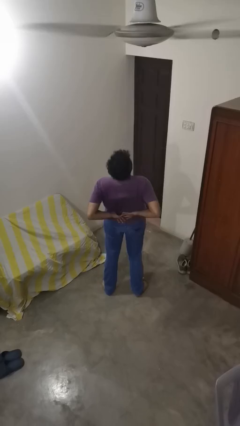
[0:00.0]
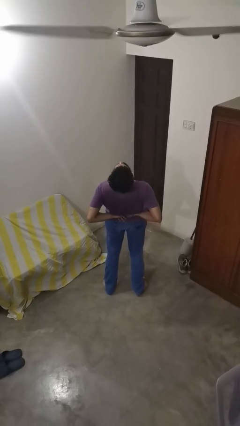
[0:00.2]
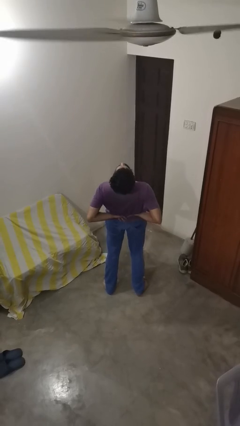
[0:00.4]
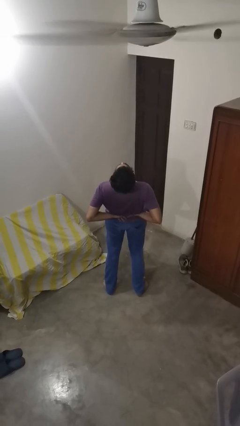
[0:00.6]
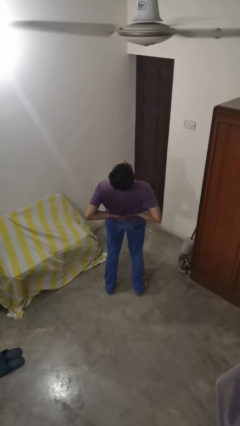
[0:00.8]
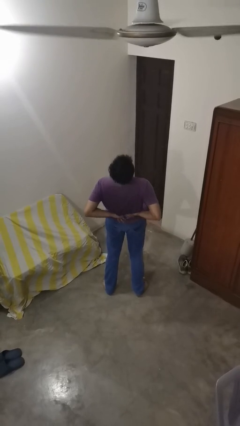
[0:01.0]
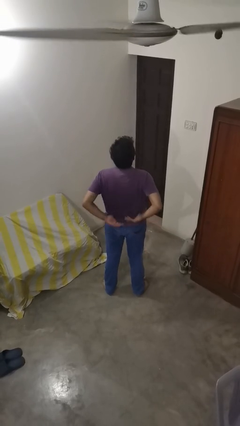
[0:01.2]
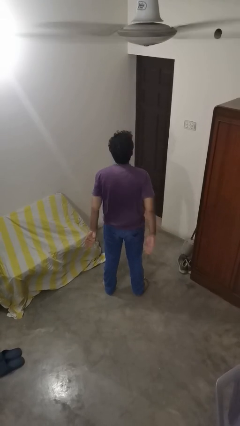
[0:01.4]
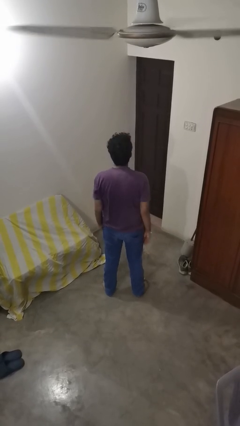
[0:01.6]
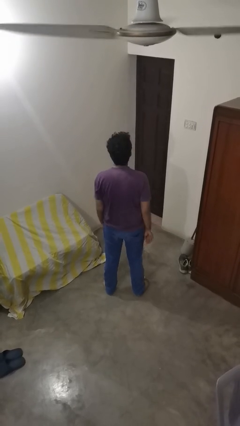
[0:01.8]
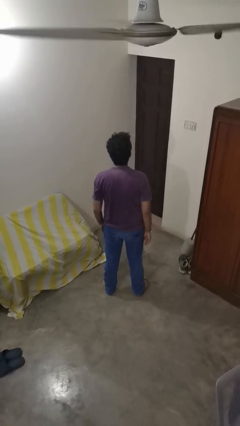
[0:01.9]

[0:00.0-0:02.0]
person stretches back

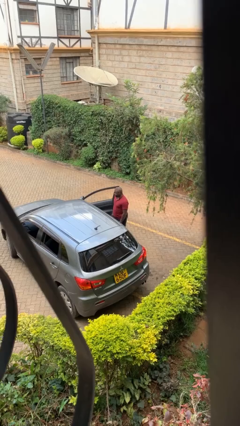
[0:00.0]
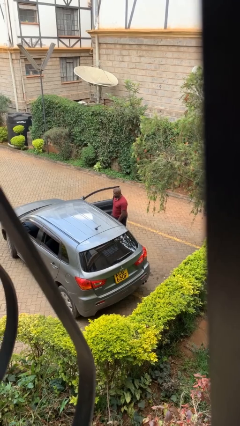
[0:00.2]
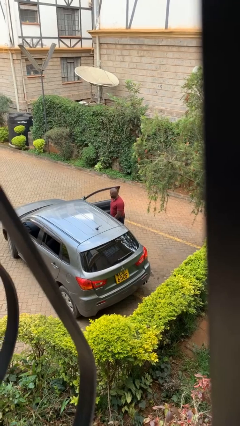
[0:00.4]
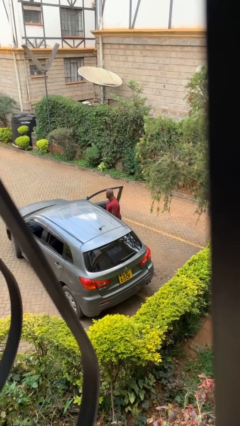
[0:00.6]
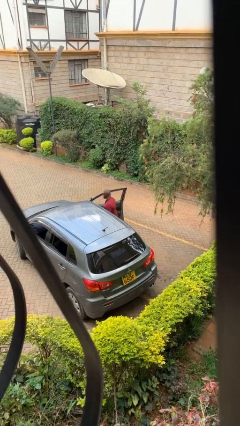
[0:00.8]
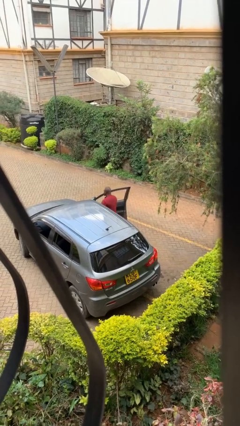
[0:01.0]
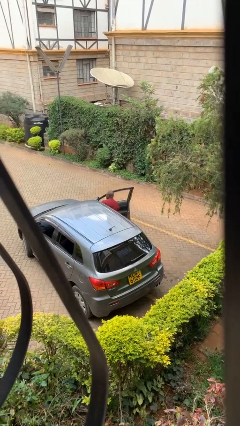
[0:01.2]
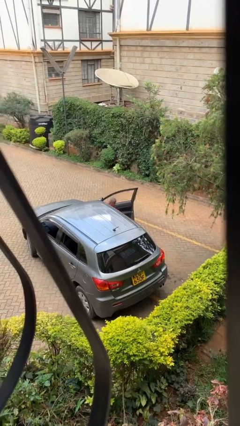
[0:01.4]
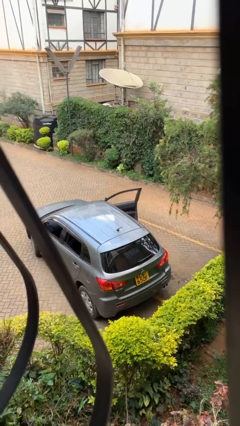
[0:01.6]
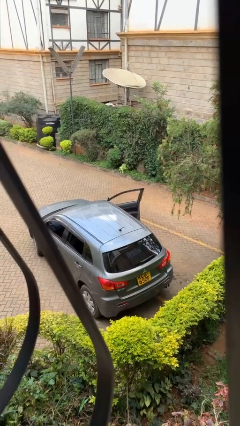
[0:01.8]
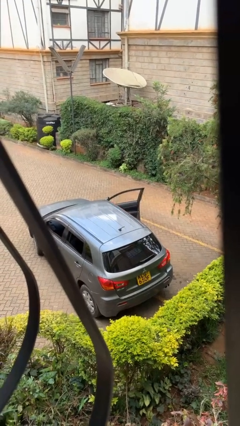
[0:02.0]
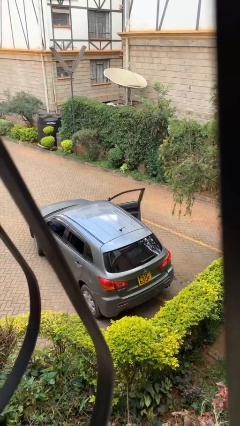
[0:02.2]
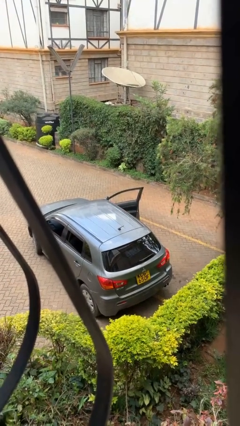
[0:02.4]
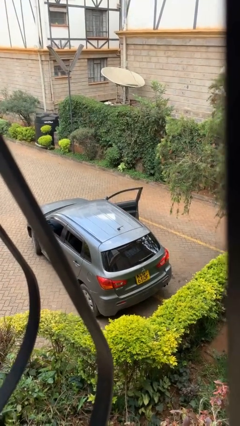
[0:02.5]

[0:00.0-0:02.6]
person enters car

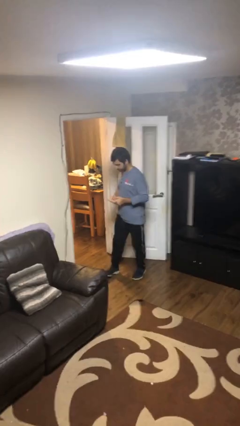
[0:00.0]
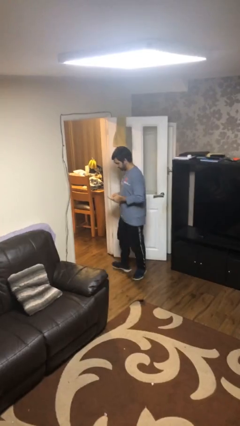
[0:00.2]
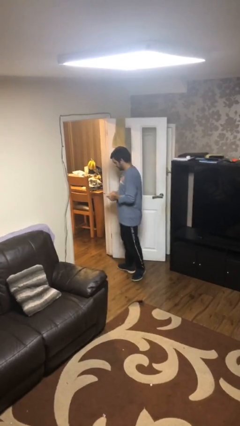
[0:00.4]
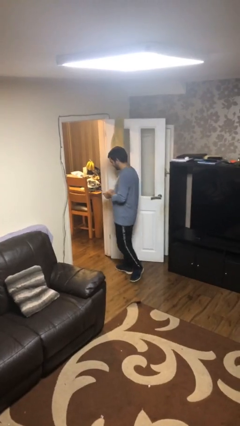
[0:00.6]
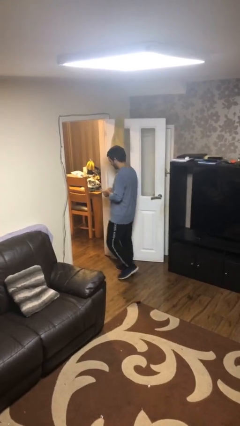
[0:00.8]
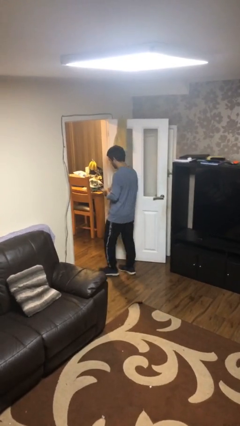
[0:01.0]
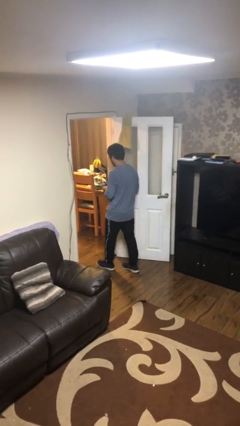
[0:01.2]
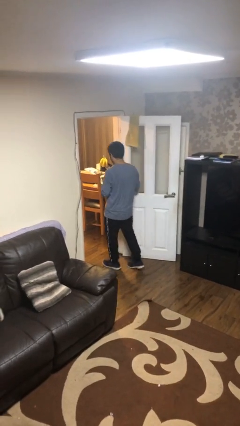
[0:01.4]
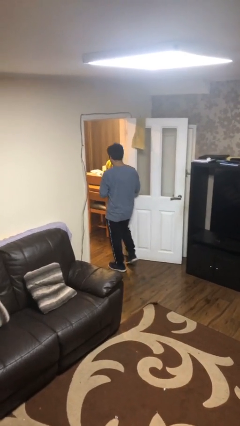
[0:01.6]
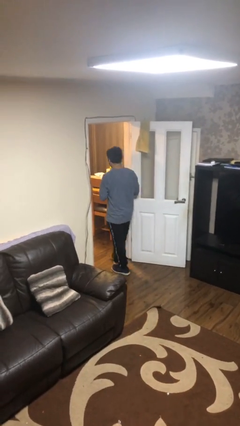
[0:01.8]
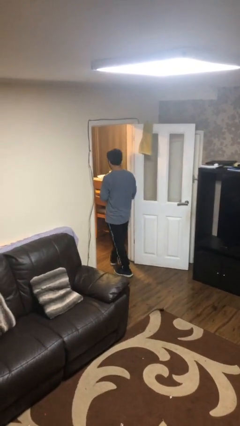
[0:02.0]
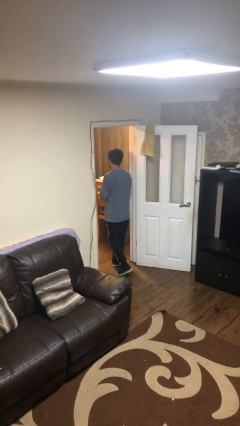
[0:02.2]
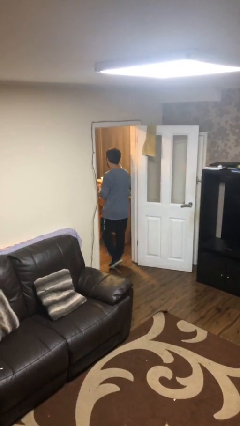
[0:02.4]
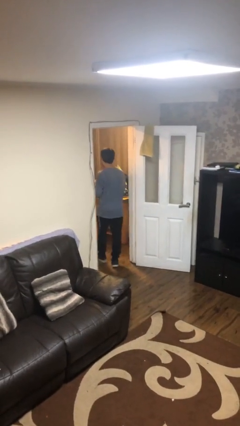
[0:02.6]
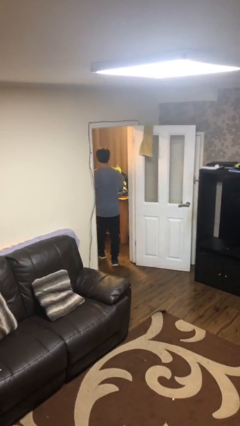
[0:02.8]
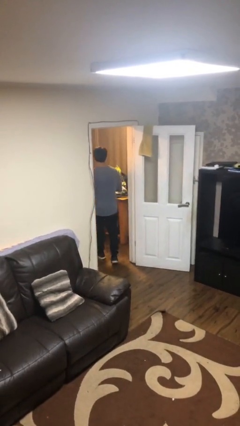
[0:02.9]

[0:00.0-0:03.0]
person exits scene through structure

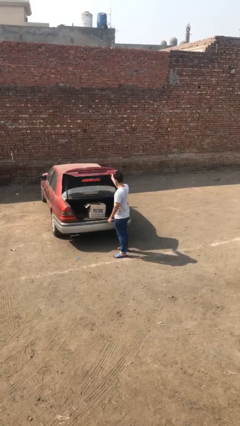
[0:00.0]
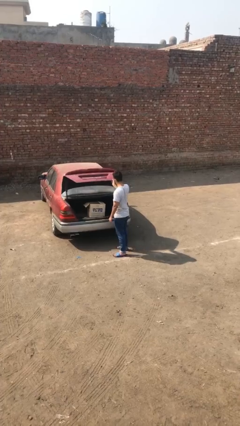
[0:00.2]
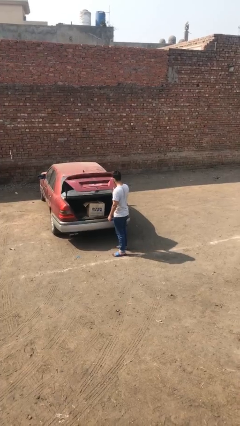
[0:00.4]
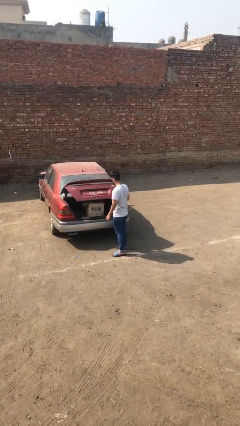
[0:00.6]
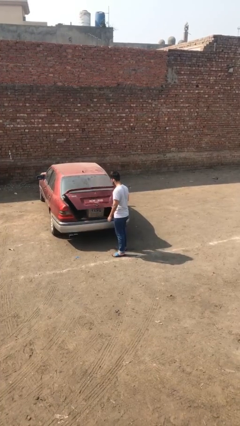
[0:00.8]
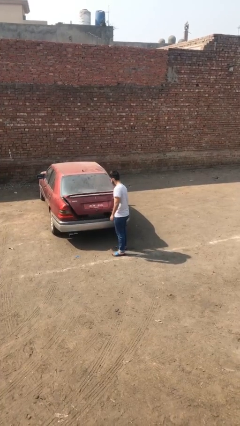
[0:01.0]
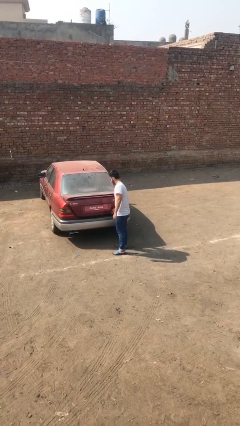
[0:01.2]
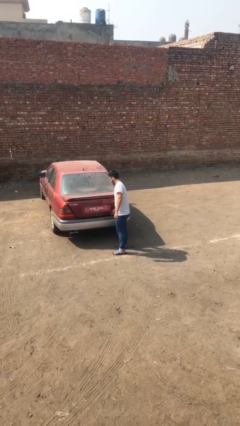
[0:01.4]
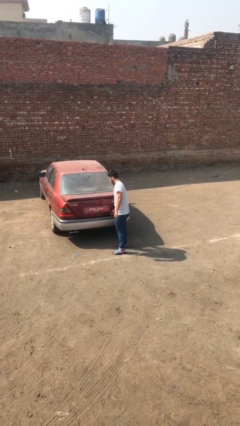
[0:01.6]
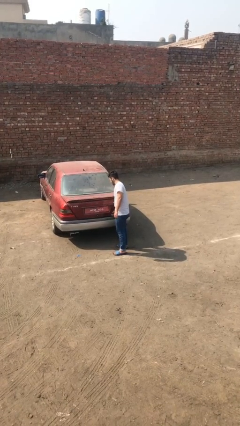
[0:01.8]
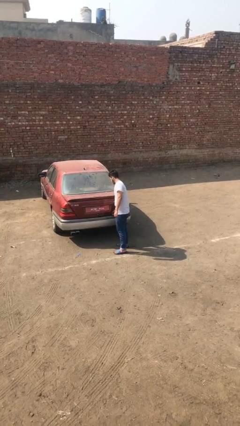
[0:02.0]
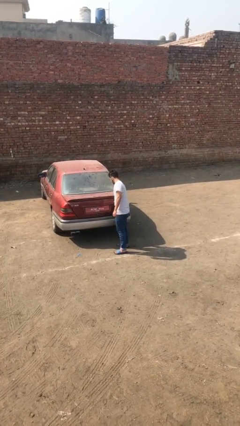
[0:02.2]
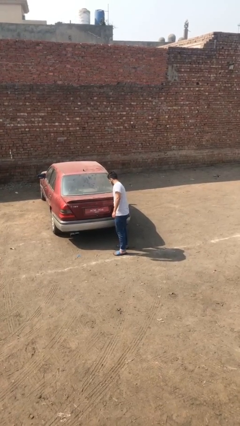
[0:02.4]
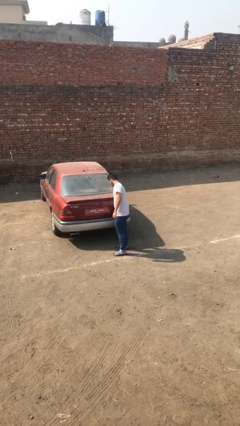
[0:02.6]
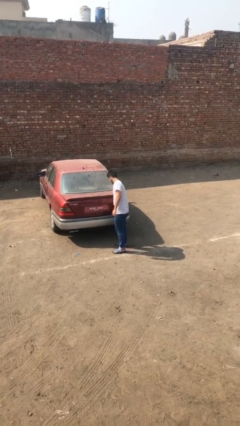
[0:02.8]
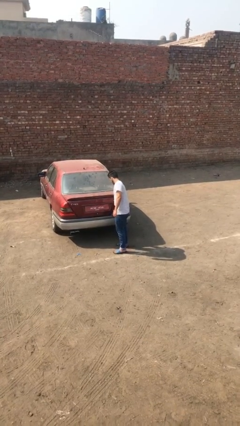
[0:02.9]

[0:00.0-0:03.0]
person closes car trunk

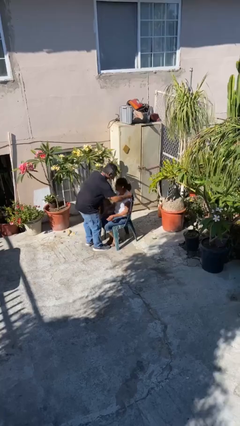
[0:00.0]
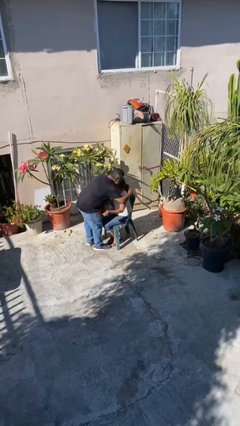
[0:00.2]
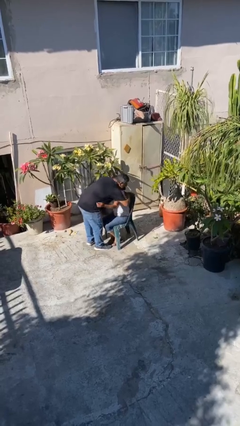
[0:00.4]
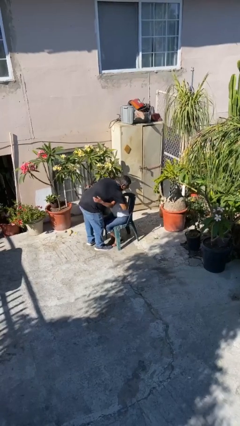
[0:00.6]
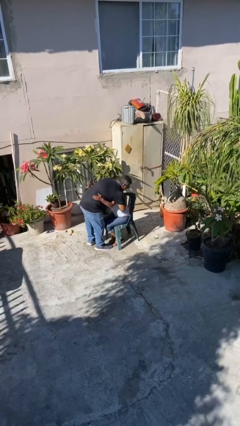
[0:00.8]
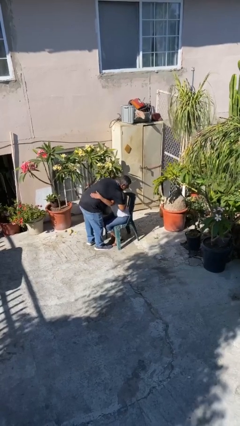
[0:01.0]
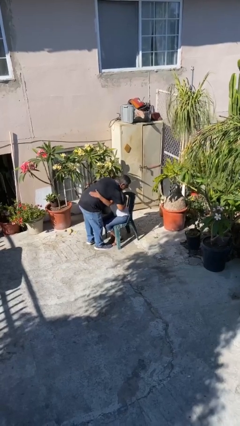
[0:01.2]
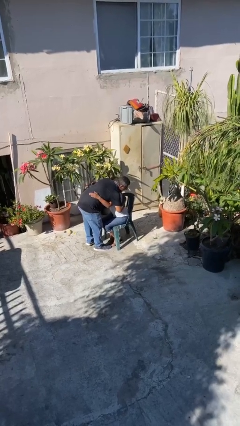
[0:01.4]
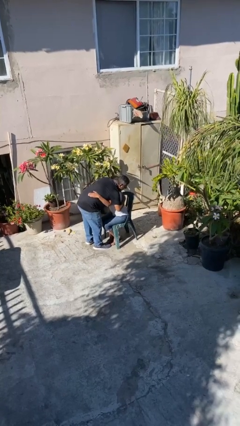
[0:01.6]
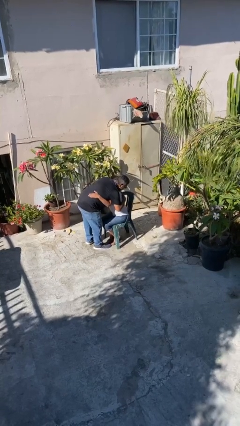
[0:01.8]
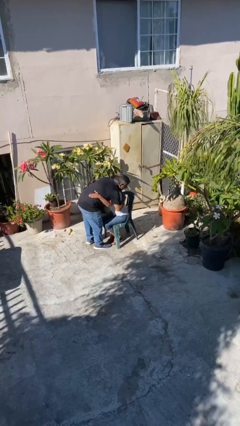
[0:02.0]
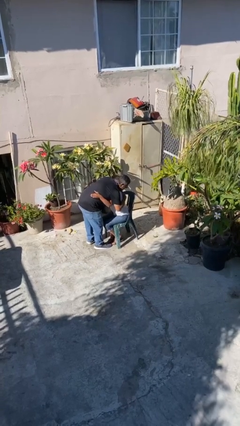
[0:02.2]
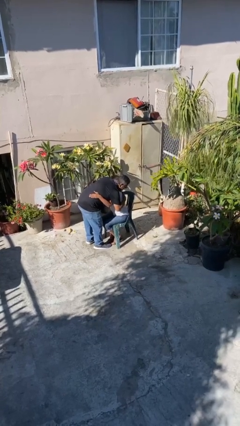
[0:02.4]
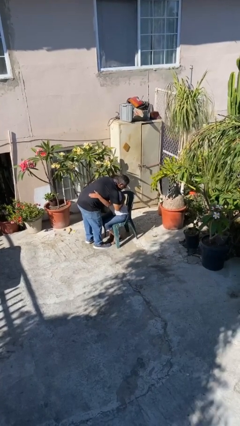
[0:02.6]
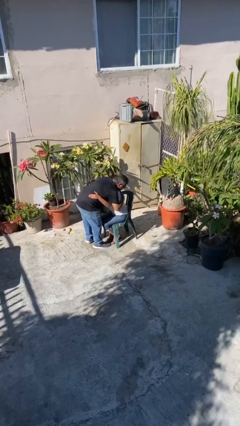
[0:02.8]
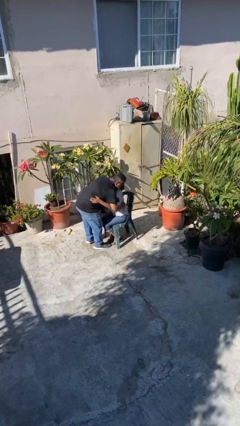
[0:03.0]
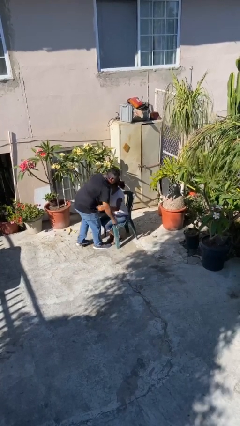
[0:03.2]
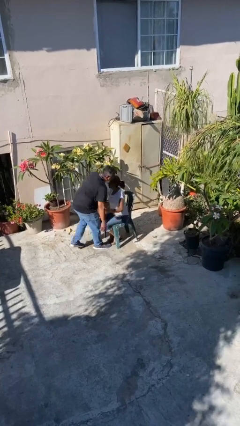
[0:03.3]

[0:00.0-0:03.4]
person embraces person

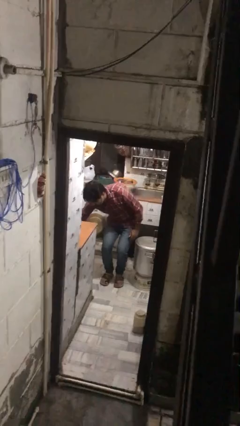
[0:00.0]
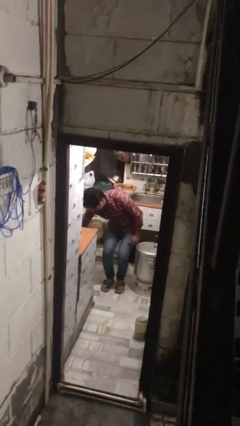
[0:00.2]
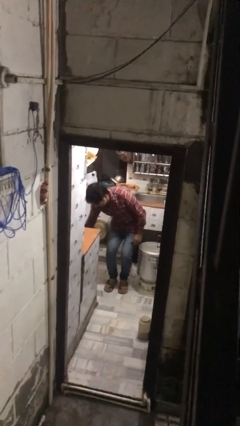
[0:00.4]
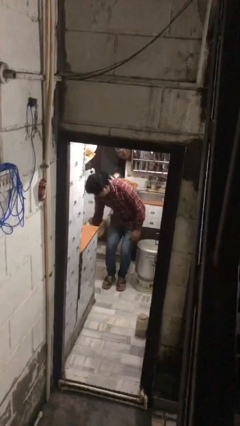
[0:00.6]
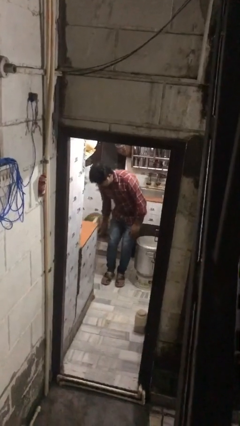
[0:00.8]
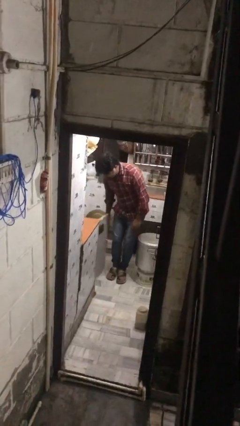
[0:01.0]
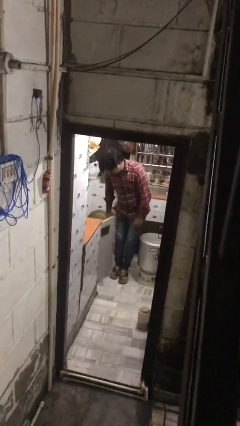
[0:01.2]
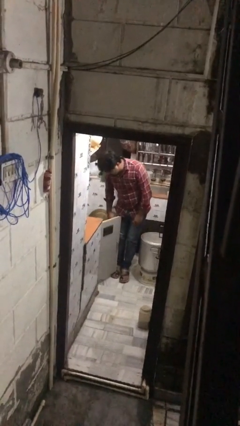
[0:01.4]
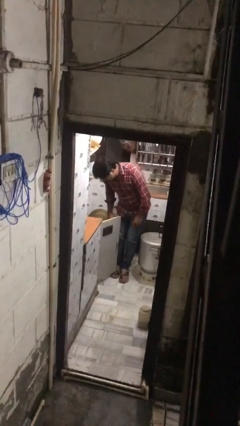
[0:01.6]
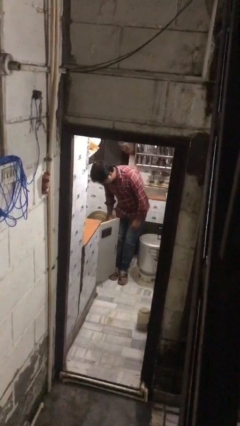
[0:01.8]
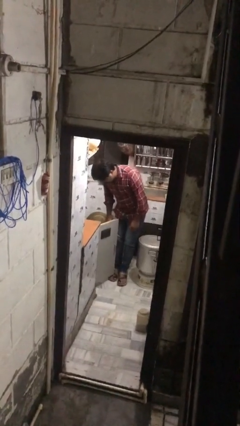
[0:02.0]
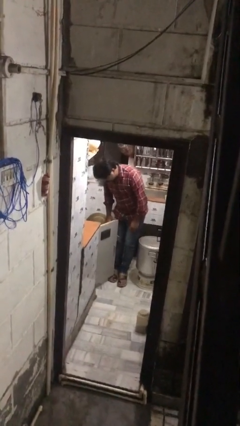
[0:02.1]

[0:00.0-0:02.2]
person opens kitchen drawer

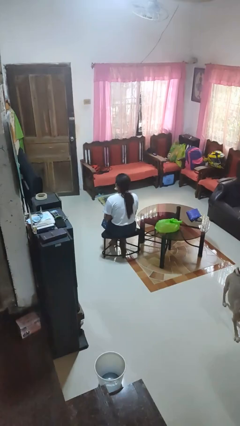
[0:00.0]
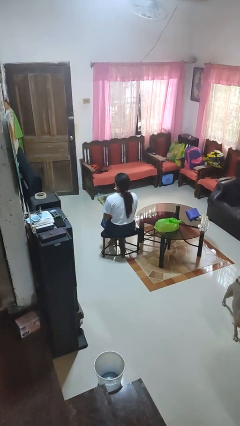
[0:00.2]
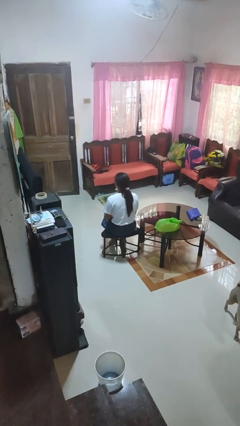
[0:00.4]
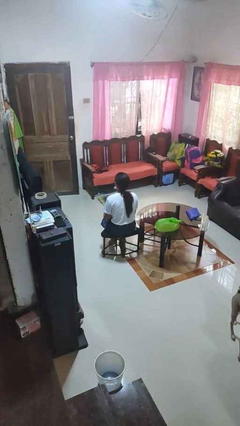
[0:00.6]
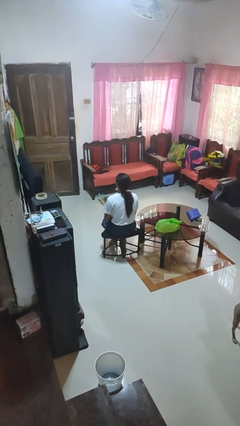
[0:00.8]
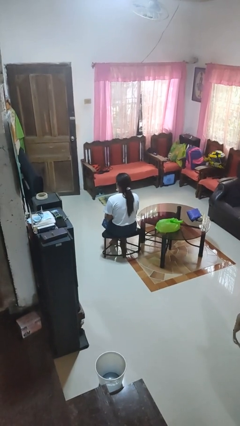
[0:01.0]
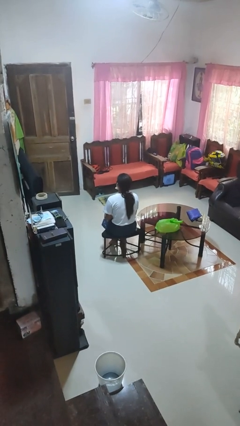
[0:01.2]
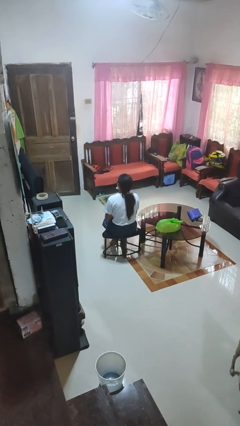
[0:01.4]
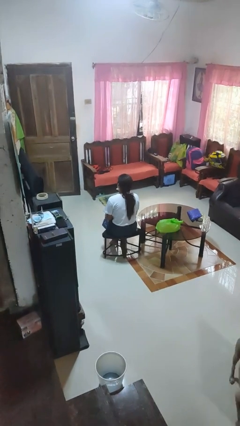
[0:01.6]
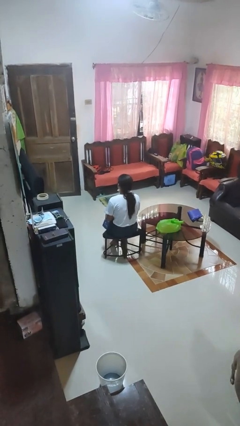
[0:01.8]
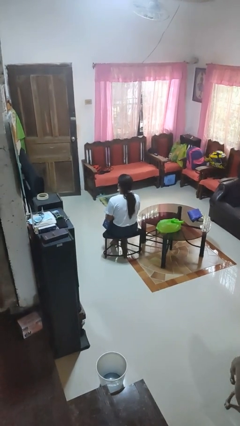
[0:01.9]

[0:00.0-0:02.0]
person nods head
